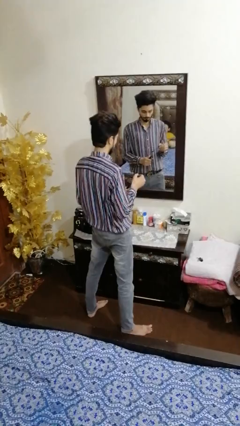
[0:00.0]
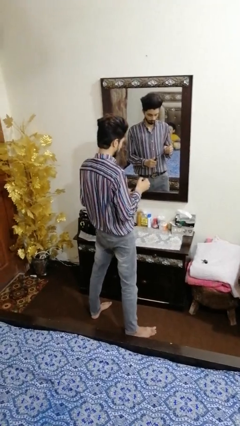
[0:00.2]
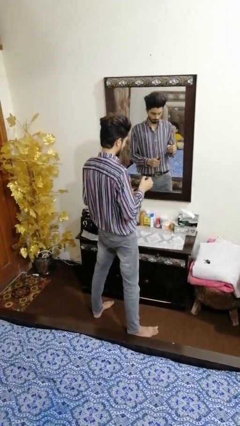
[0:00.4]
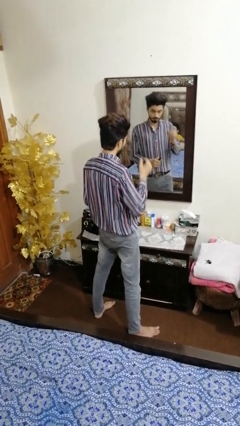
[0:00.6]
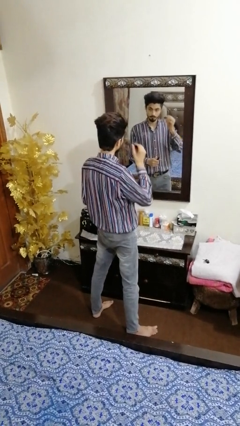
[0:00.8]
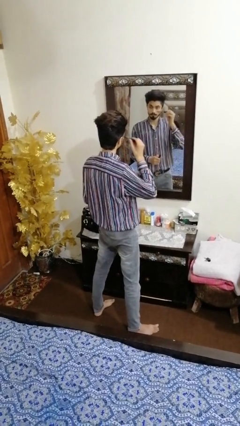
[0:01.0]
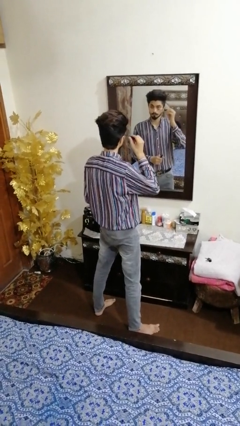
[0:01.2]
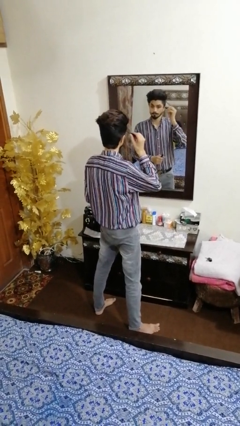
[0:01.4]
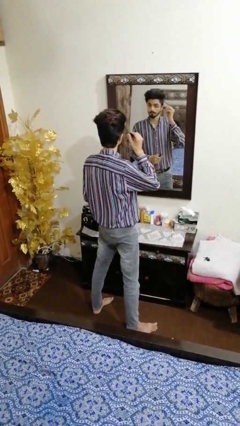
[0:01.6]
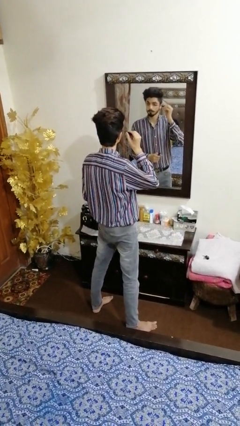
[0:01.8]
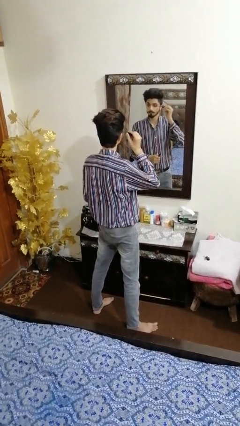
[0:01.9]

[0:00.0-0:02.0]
person applies eye makeup

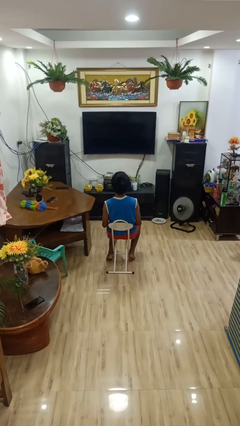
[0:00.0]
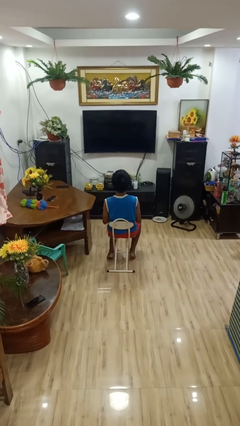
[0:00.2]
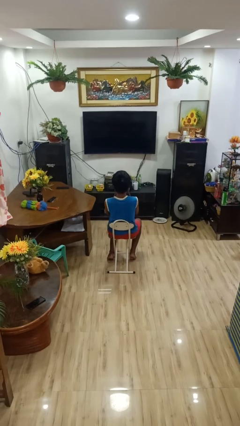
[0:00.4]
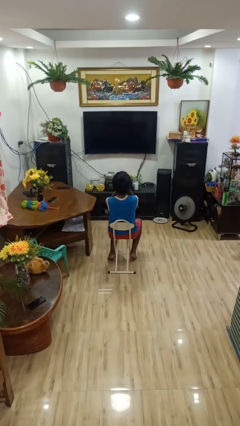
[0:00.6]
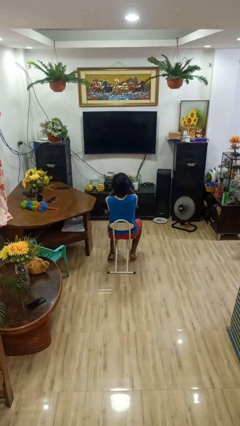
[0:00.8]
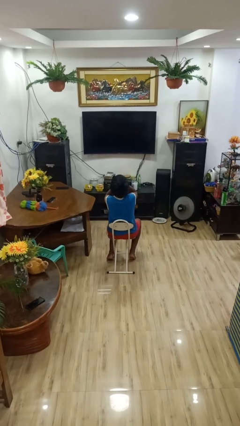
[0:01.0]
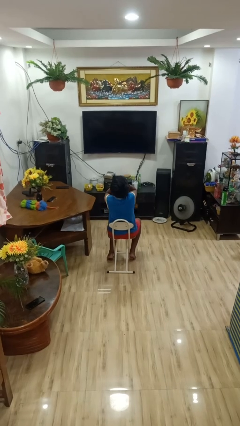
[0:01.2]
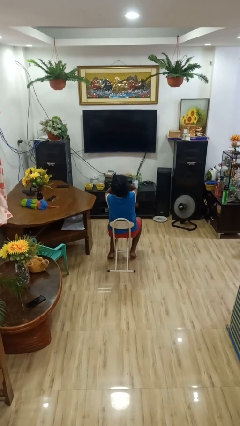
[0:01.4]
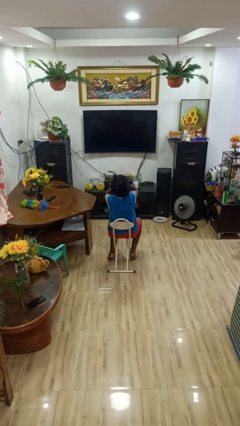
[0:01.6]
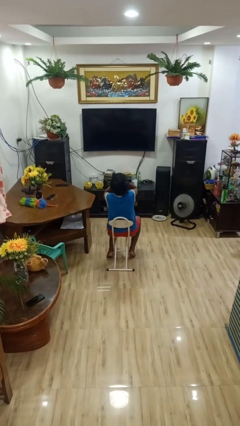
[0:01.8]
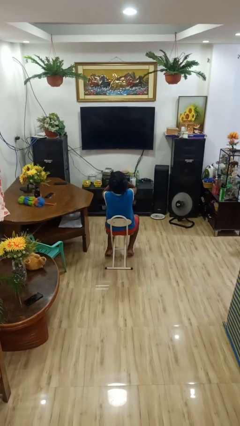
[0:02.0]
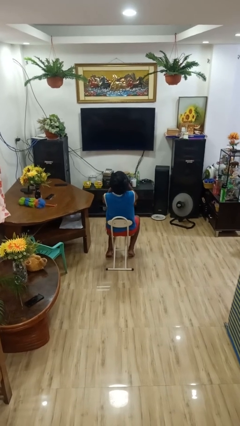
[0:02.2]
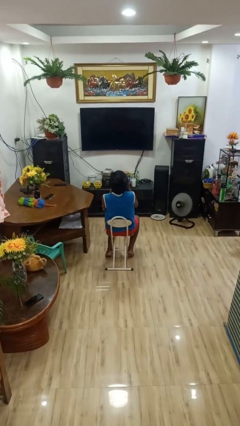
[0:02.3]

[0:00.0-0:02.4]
person covers face with hands

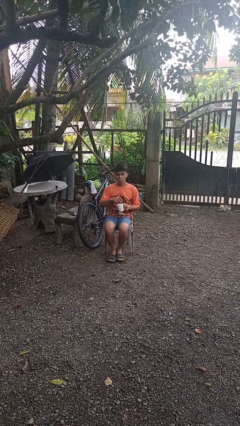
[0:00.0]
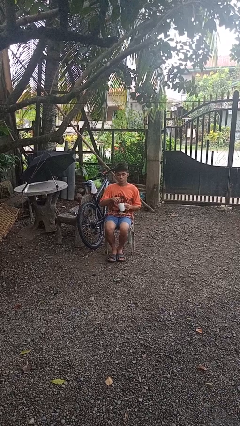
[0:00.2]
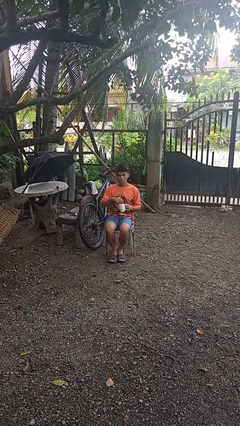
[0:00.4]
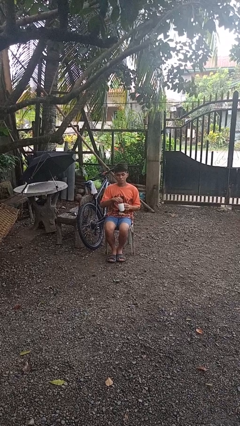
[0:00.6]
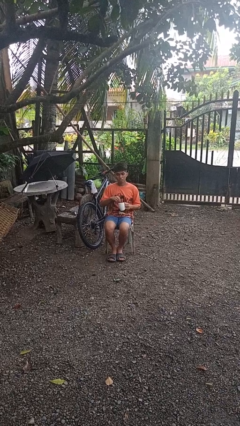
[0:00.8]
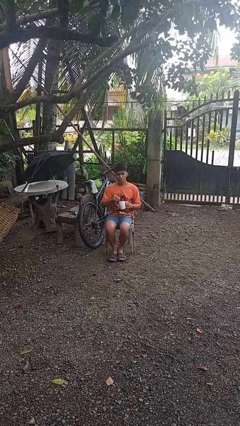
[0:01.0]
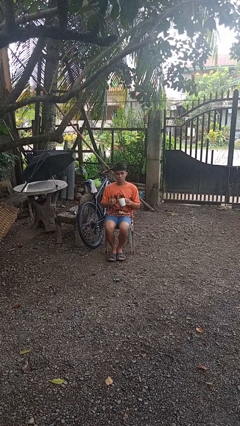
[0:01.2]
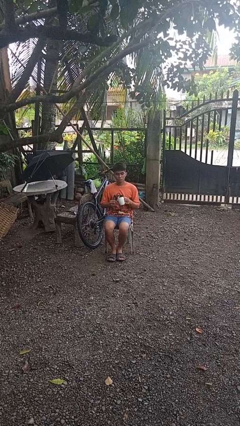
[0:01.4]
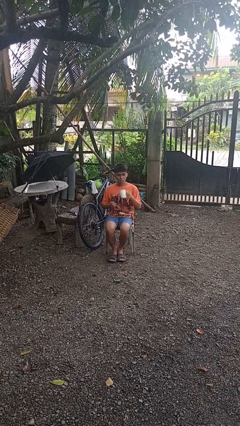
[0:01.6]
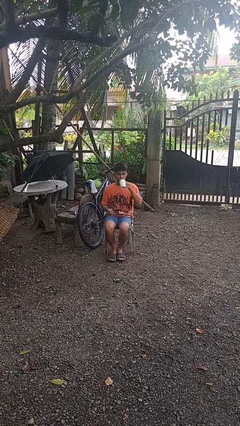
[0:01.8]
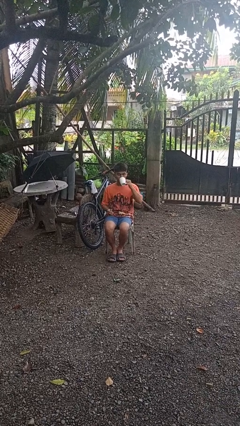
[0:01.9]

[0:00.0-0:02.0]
person stirs mug

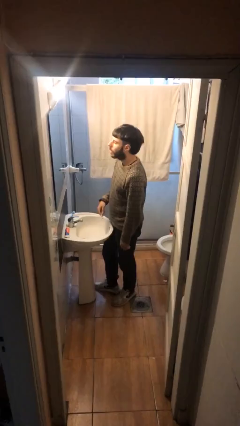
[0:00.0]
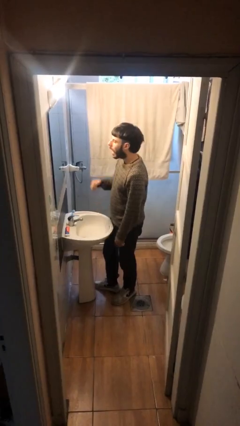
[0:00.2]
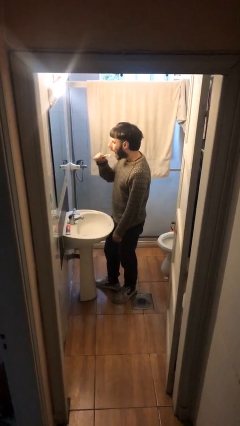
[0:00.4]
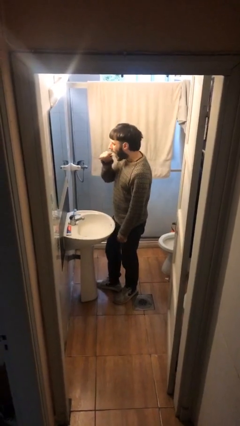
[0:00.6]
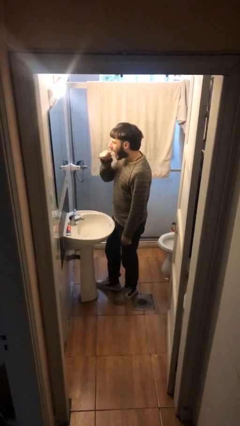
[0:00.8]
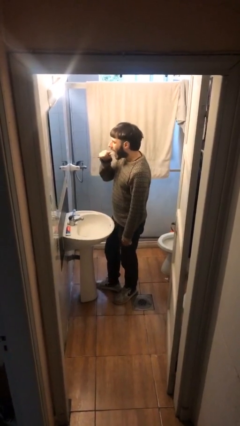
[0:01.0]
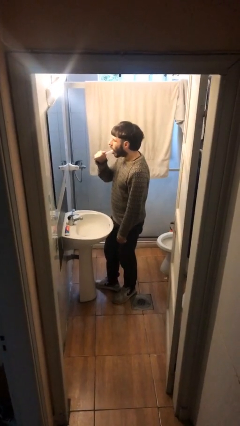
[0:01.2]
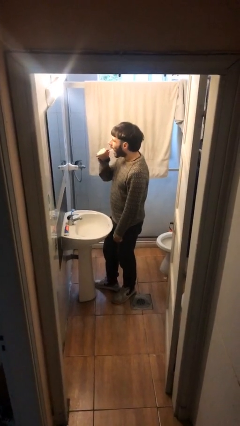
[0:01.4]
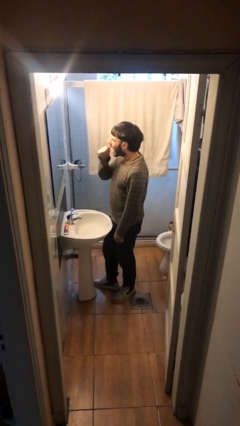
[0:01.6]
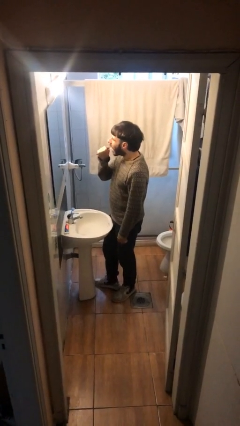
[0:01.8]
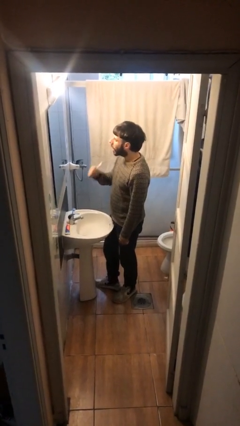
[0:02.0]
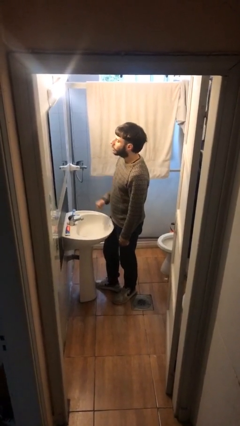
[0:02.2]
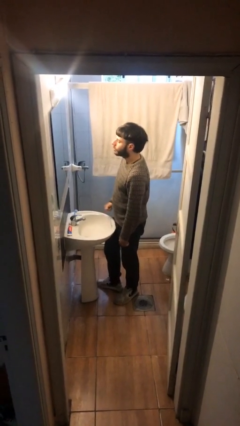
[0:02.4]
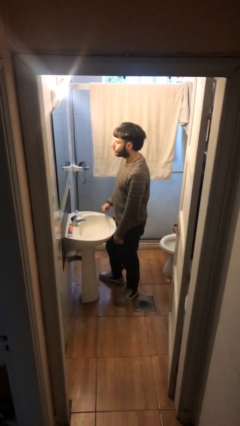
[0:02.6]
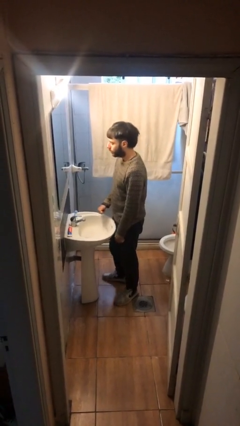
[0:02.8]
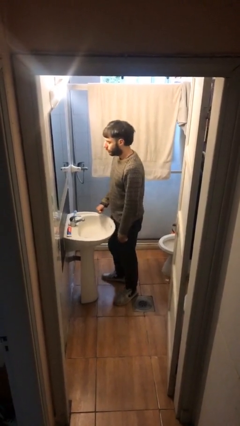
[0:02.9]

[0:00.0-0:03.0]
person brushes teeth

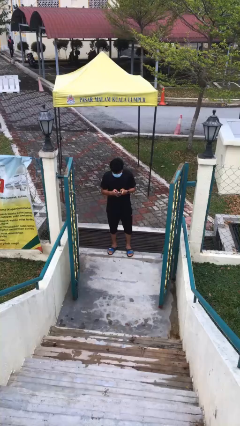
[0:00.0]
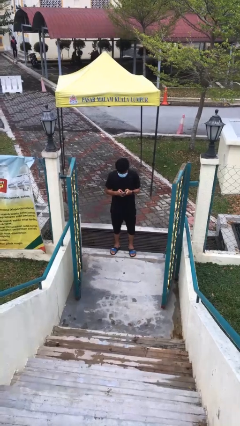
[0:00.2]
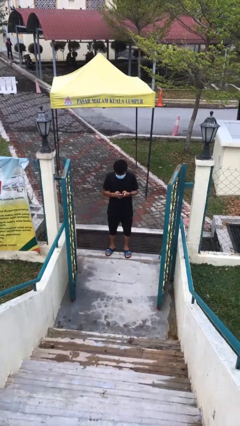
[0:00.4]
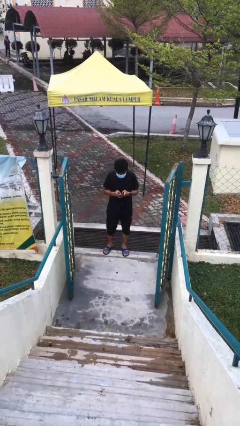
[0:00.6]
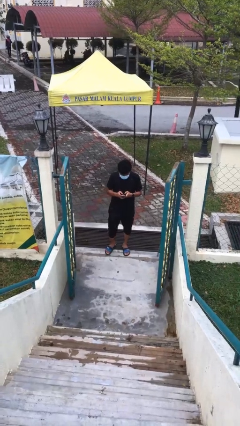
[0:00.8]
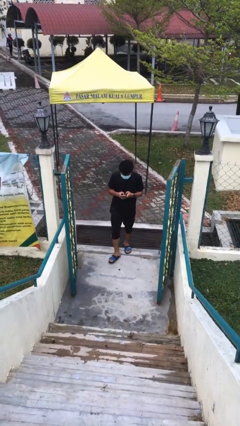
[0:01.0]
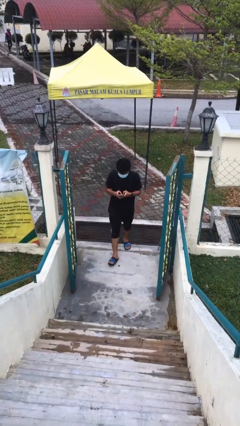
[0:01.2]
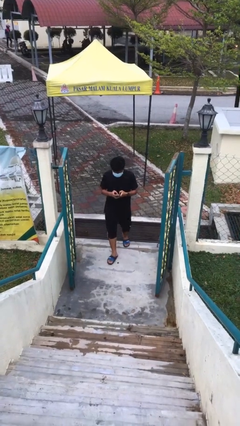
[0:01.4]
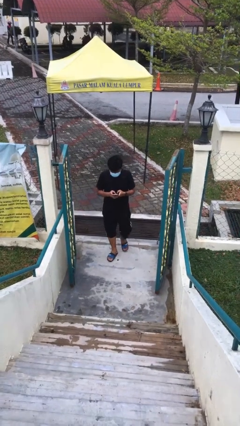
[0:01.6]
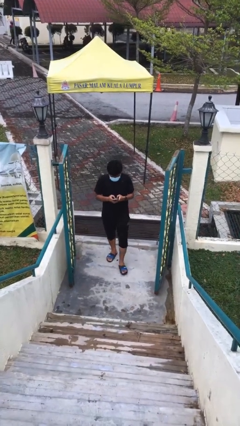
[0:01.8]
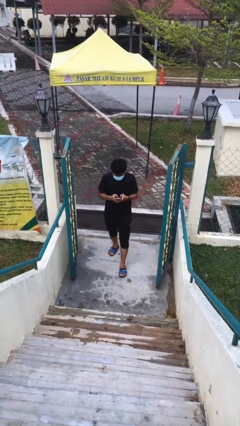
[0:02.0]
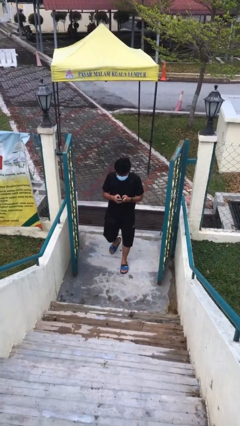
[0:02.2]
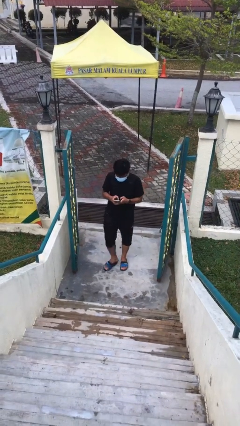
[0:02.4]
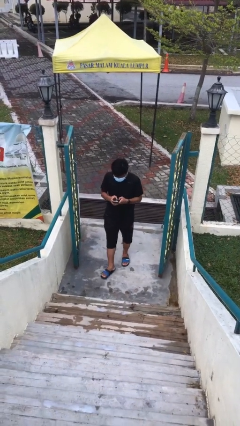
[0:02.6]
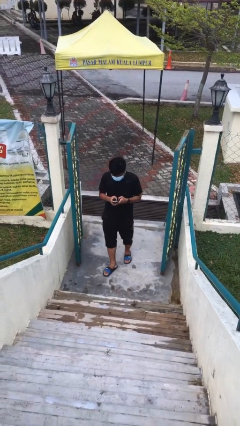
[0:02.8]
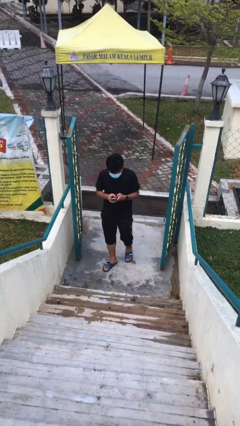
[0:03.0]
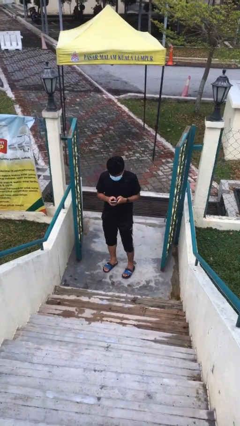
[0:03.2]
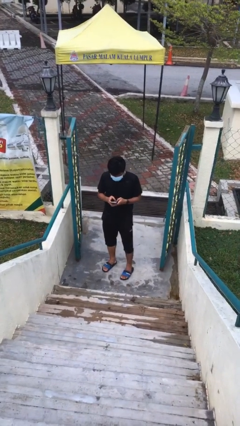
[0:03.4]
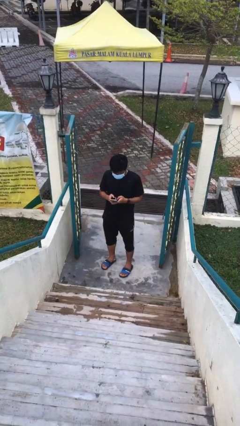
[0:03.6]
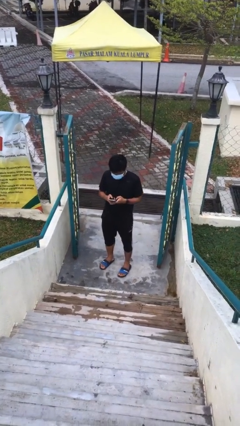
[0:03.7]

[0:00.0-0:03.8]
person enters scene through structure

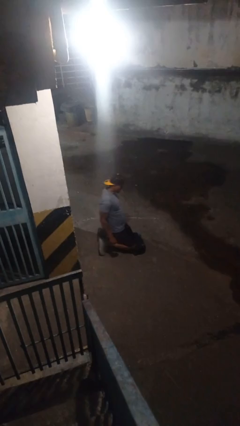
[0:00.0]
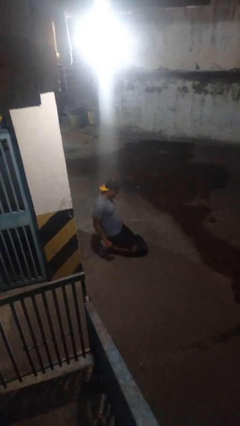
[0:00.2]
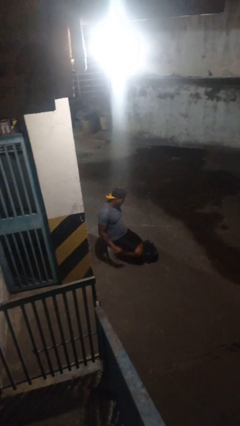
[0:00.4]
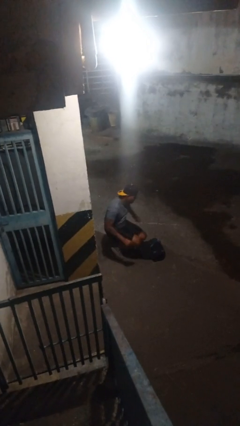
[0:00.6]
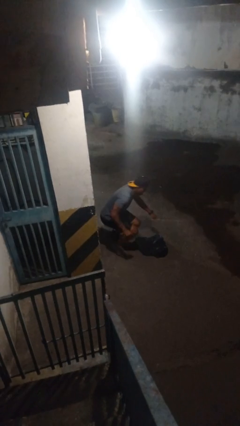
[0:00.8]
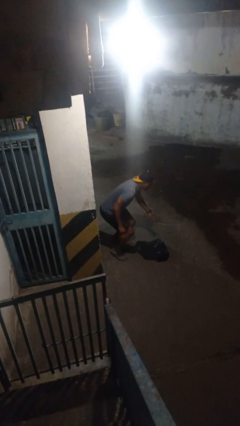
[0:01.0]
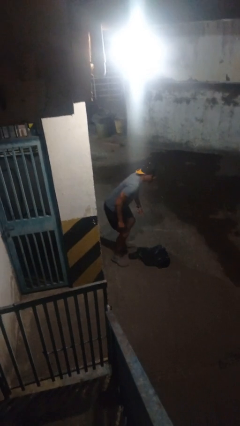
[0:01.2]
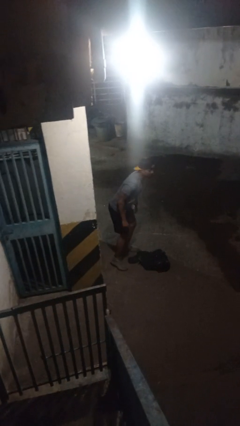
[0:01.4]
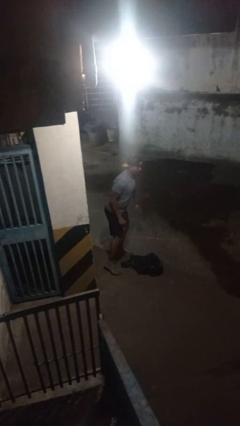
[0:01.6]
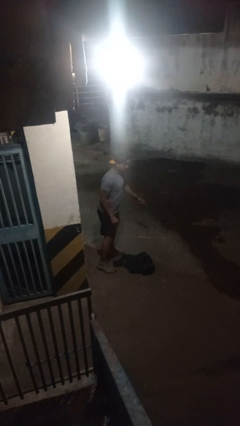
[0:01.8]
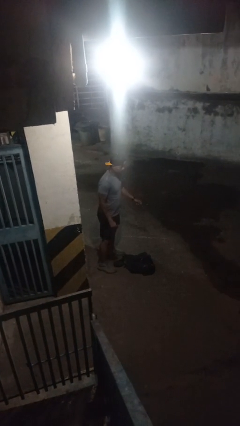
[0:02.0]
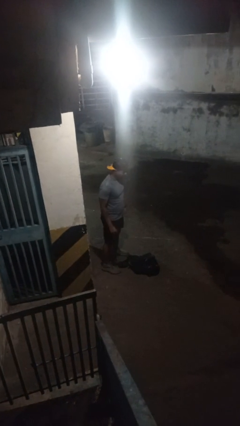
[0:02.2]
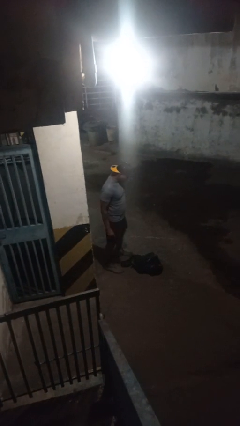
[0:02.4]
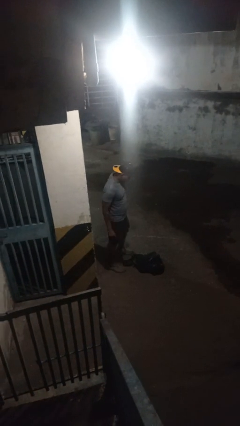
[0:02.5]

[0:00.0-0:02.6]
person stands up from floor

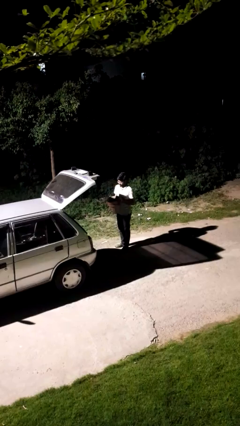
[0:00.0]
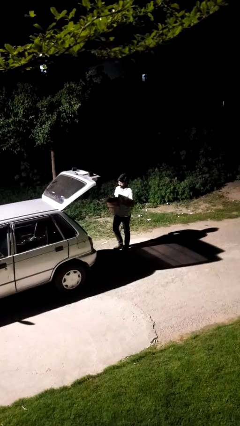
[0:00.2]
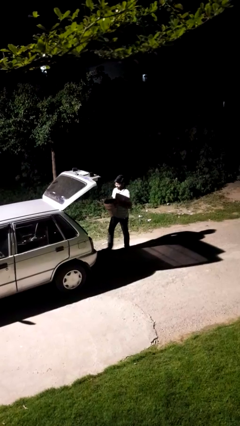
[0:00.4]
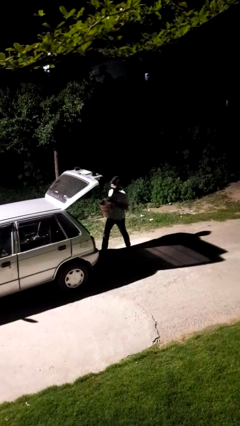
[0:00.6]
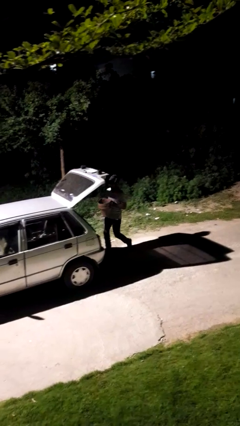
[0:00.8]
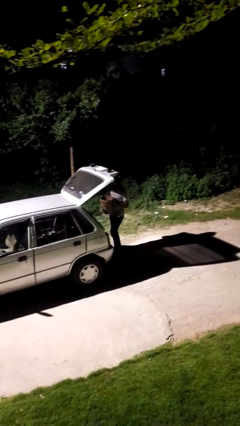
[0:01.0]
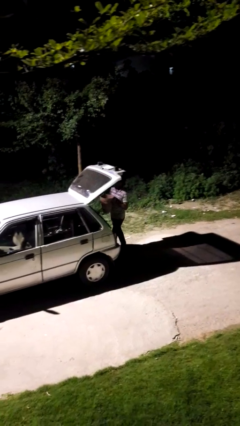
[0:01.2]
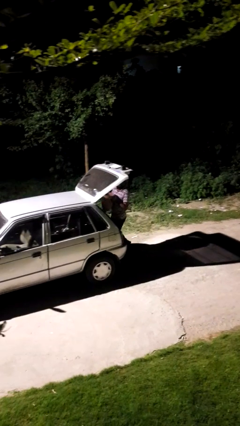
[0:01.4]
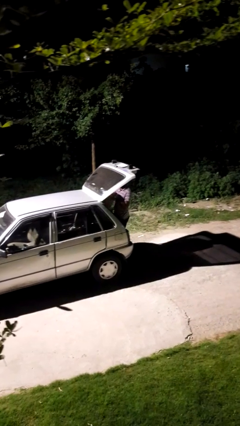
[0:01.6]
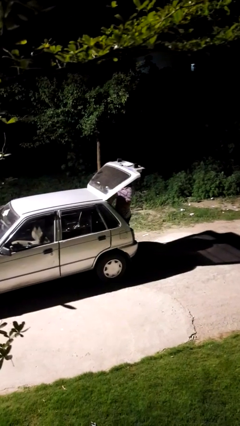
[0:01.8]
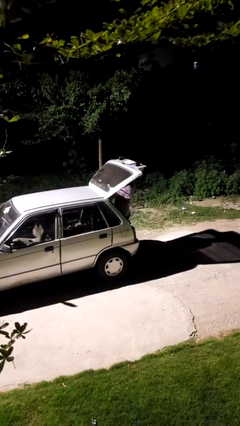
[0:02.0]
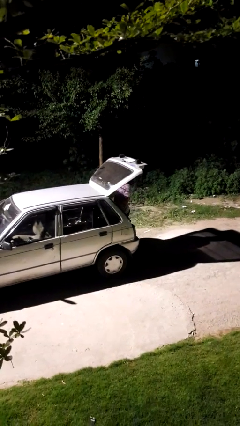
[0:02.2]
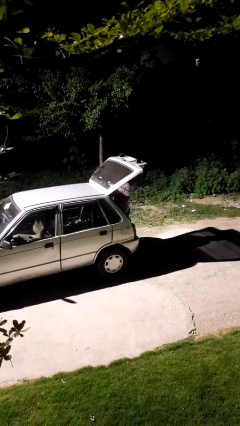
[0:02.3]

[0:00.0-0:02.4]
person loads car
